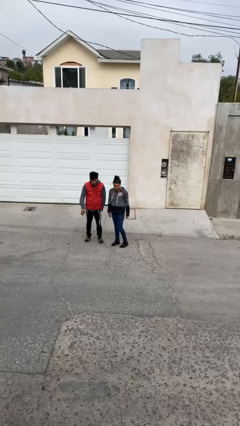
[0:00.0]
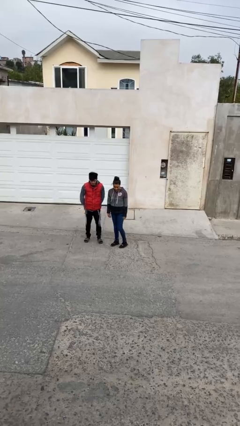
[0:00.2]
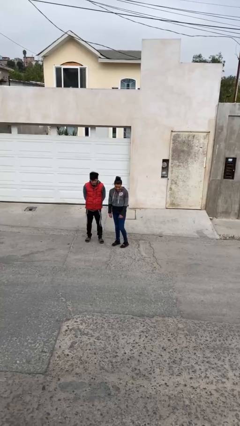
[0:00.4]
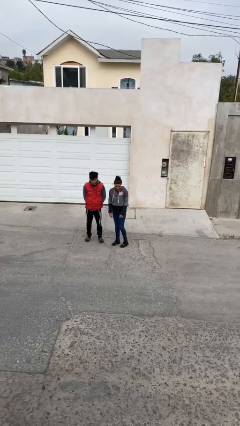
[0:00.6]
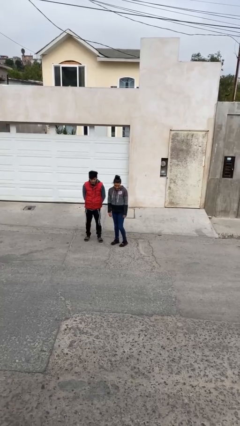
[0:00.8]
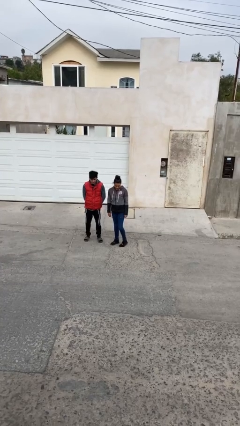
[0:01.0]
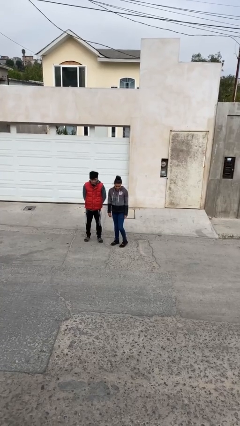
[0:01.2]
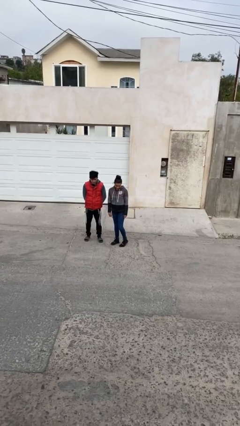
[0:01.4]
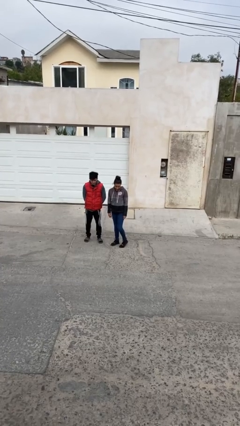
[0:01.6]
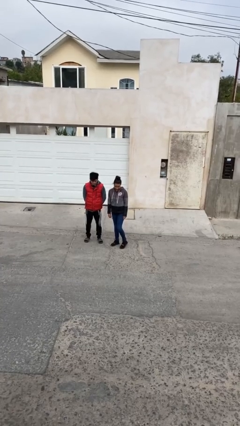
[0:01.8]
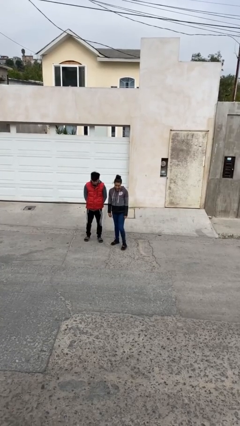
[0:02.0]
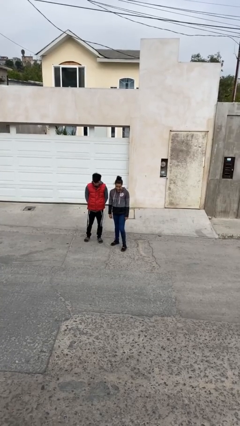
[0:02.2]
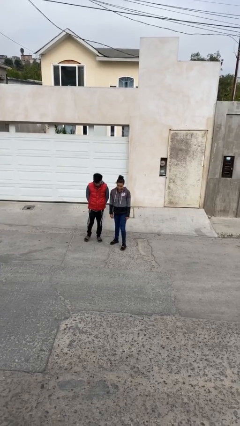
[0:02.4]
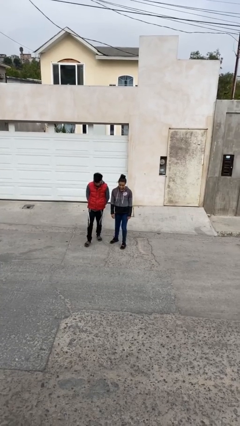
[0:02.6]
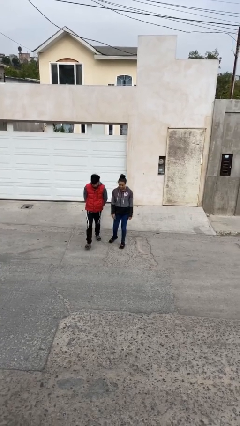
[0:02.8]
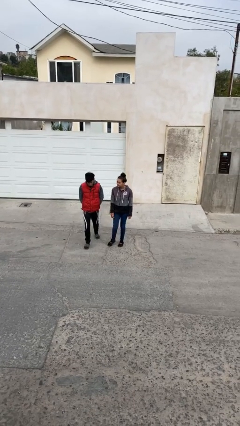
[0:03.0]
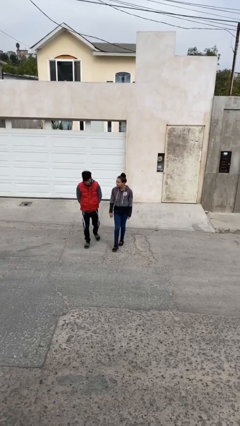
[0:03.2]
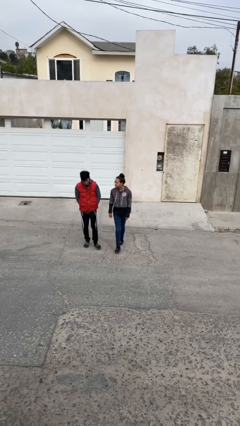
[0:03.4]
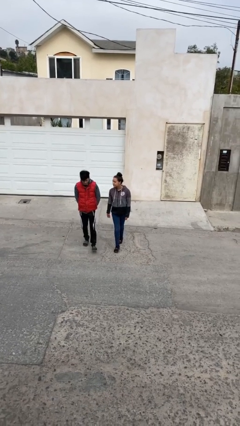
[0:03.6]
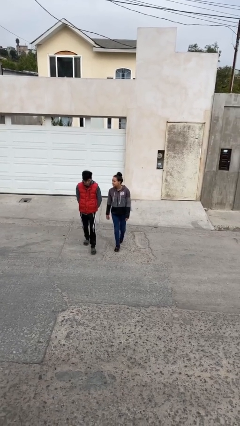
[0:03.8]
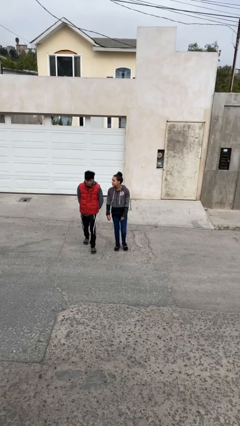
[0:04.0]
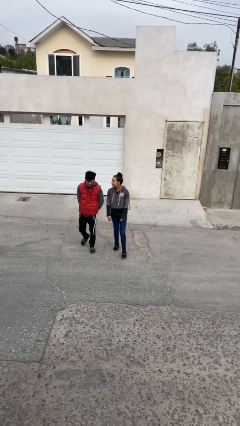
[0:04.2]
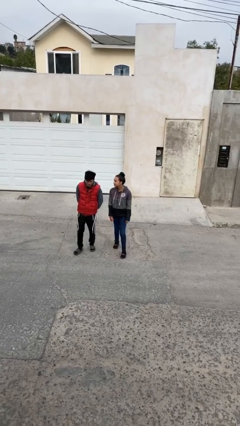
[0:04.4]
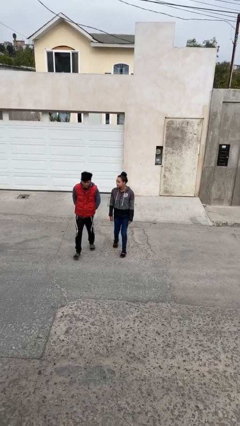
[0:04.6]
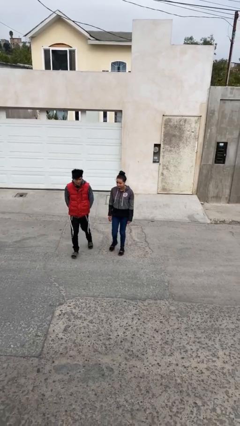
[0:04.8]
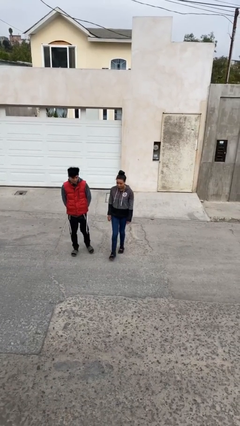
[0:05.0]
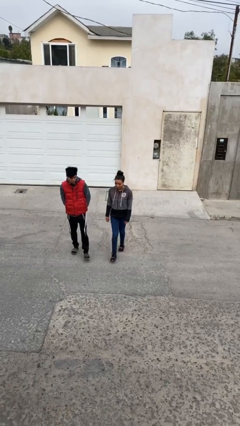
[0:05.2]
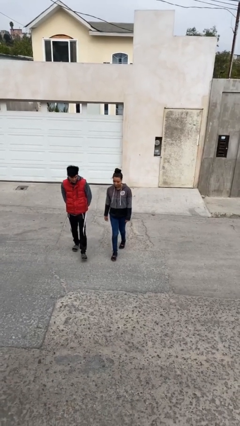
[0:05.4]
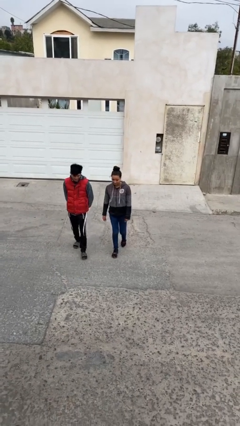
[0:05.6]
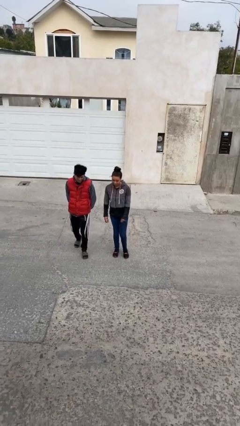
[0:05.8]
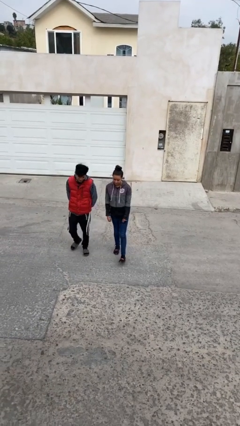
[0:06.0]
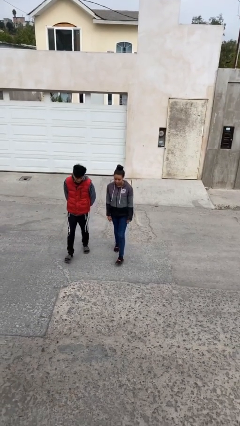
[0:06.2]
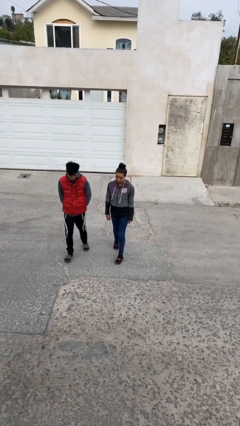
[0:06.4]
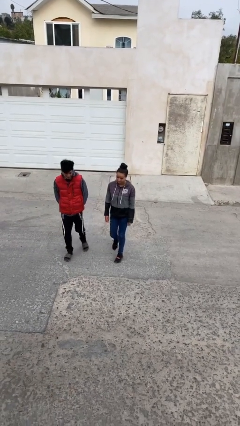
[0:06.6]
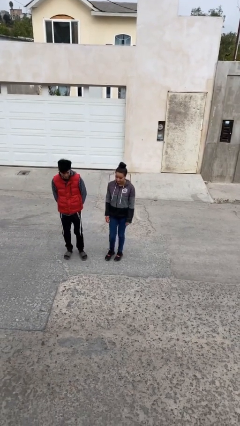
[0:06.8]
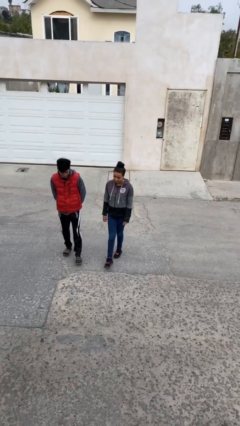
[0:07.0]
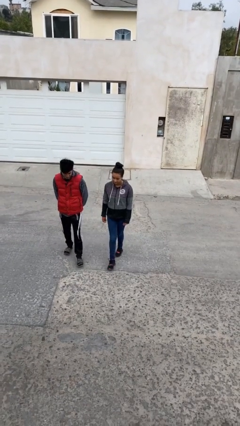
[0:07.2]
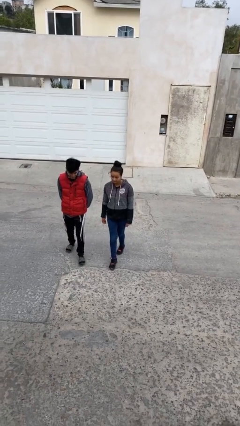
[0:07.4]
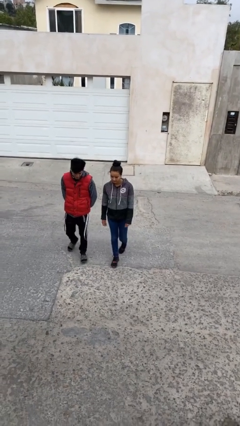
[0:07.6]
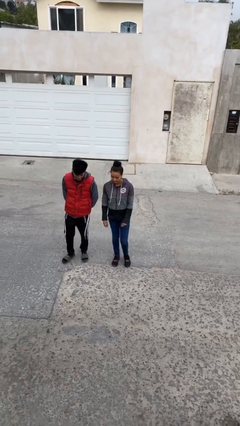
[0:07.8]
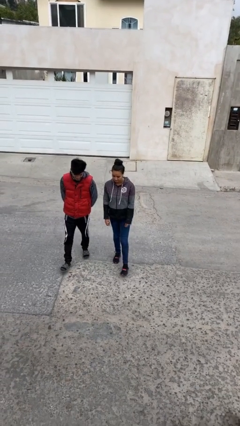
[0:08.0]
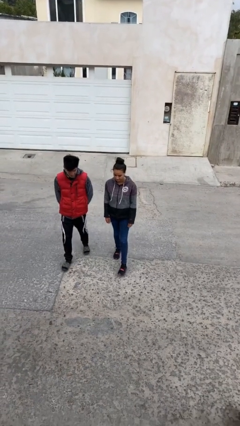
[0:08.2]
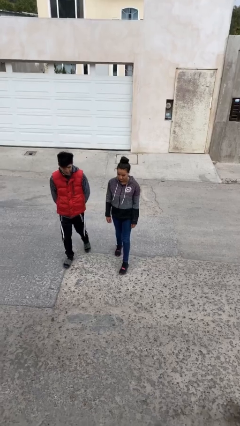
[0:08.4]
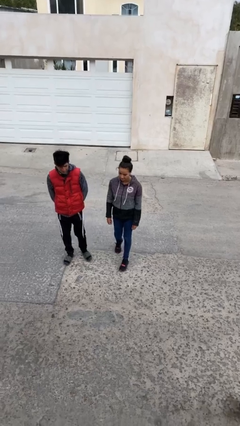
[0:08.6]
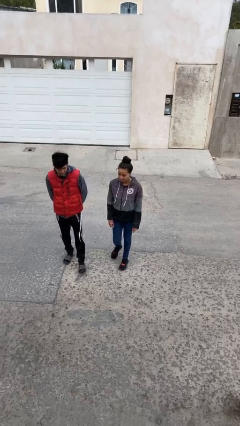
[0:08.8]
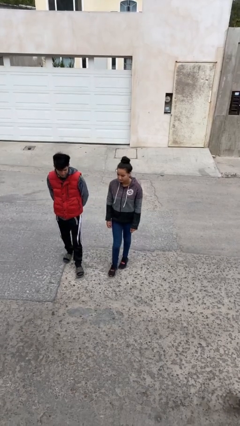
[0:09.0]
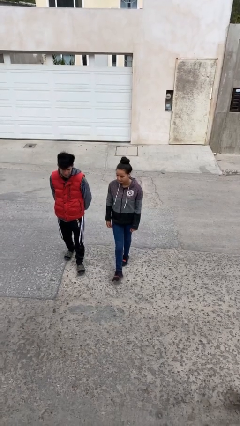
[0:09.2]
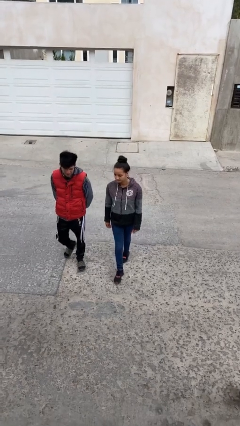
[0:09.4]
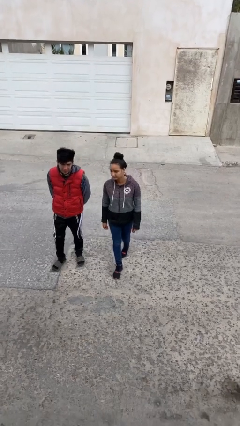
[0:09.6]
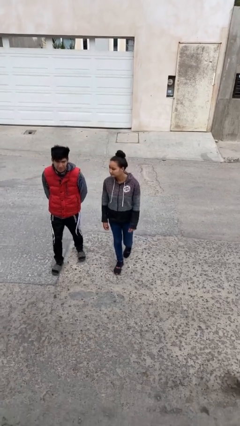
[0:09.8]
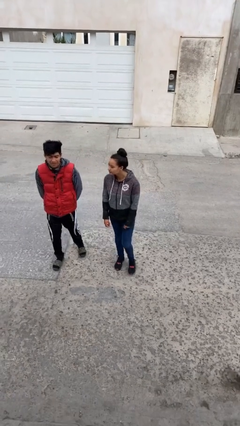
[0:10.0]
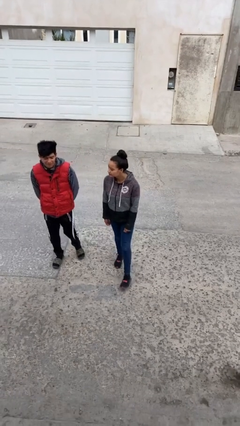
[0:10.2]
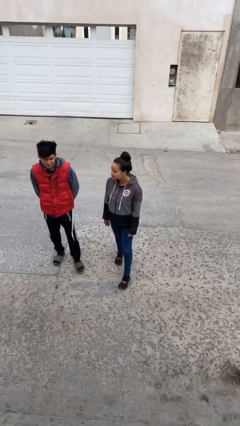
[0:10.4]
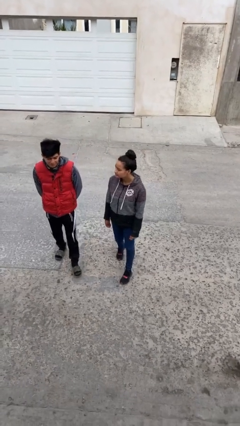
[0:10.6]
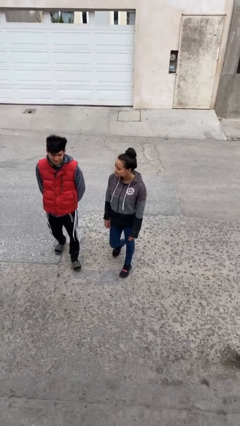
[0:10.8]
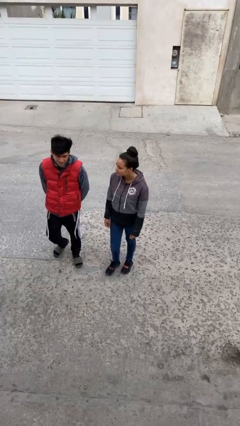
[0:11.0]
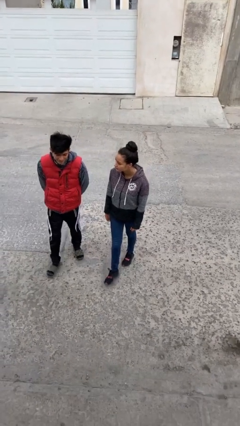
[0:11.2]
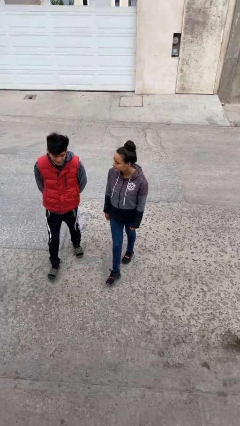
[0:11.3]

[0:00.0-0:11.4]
person talks to person

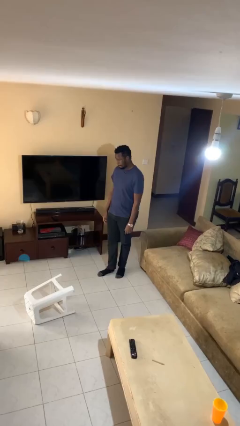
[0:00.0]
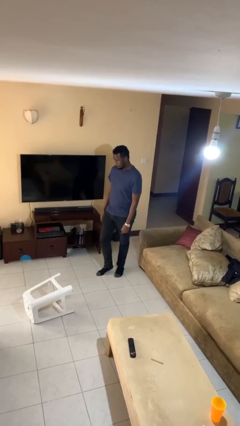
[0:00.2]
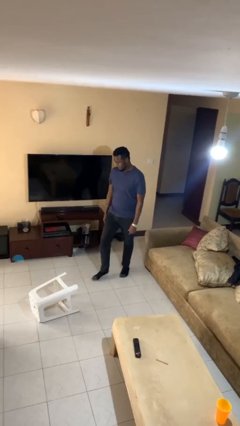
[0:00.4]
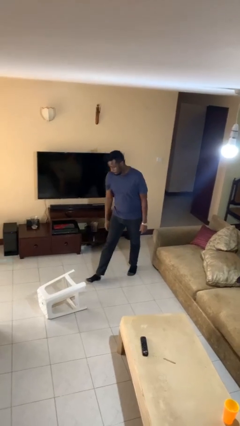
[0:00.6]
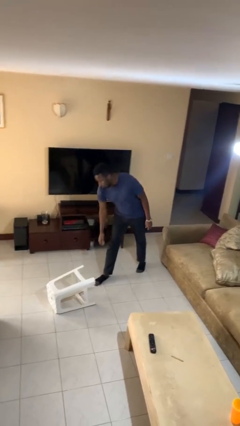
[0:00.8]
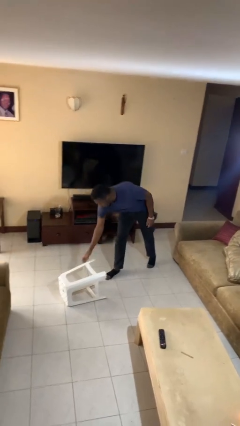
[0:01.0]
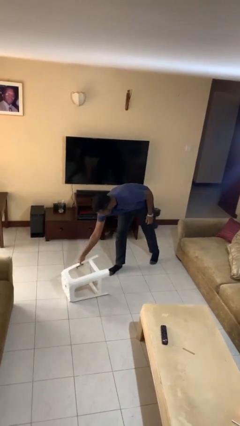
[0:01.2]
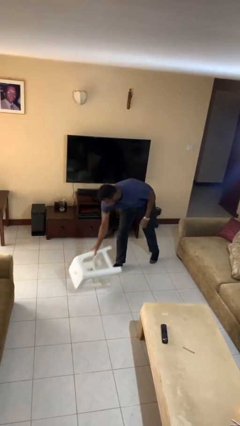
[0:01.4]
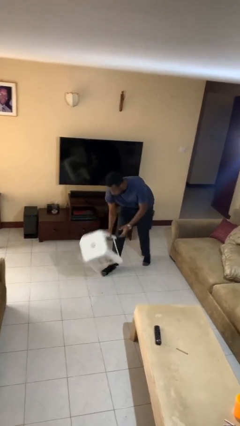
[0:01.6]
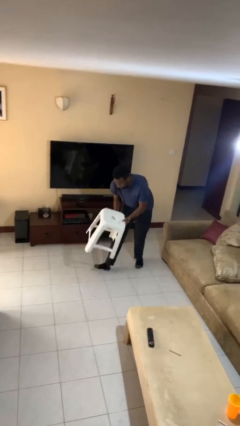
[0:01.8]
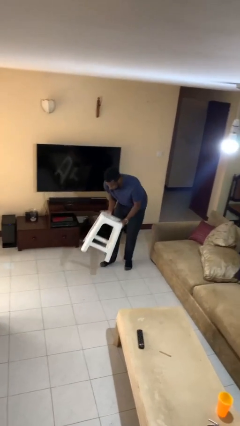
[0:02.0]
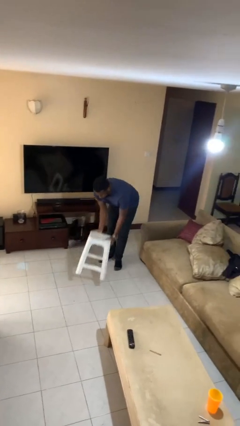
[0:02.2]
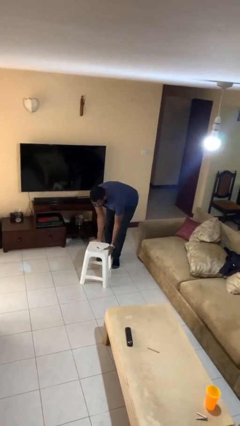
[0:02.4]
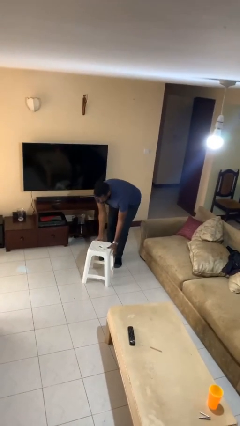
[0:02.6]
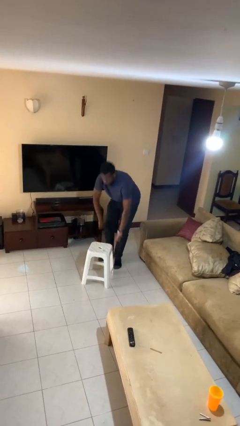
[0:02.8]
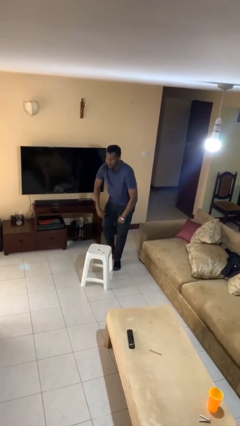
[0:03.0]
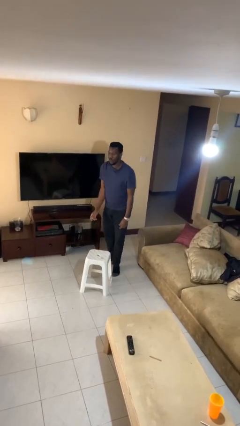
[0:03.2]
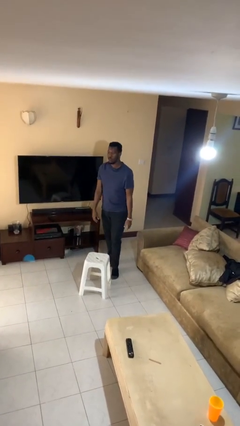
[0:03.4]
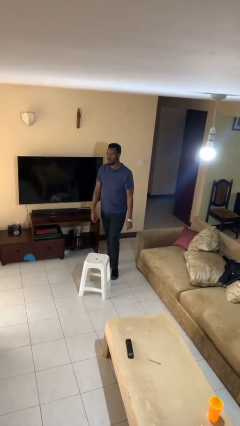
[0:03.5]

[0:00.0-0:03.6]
person sets upright furniture

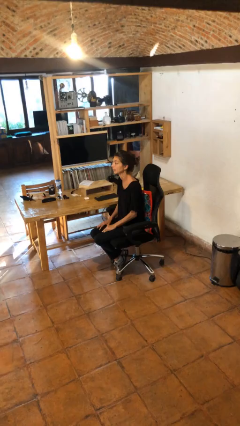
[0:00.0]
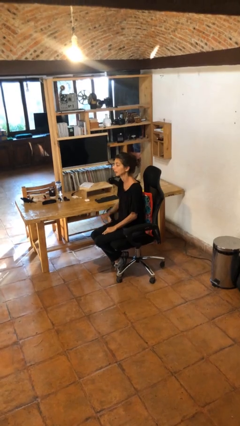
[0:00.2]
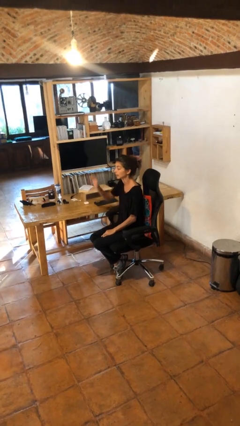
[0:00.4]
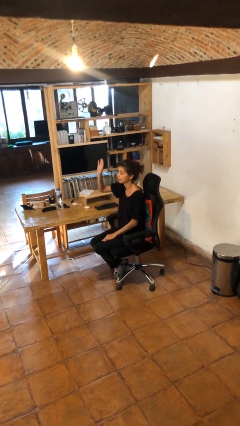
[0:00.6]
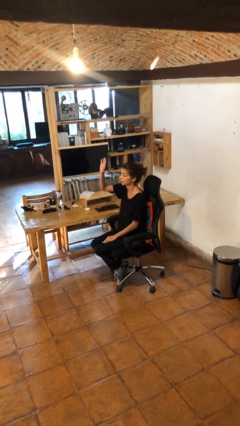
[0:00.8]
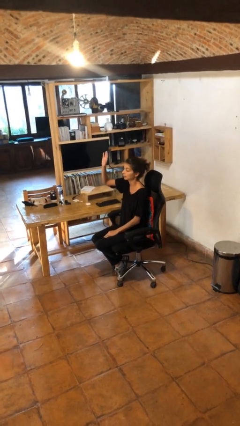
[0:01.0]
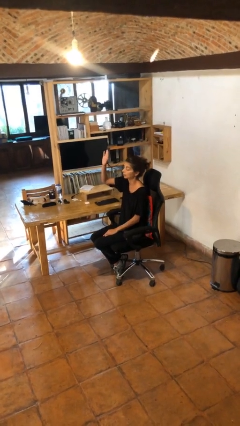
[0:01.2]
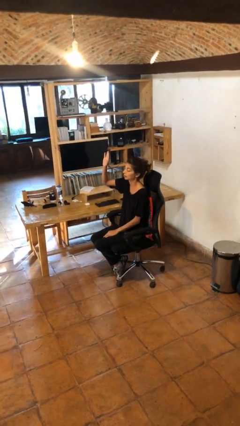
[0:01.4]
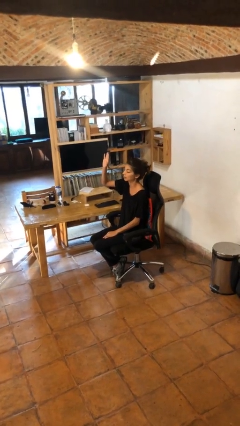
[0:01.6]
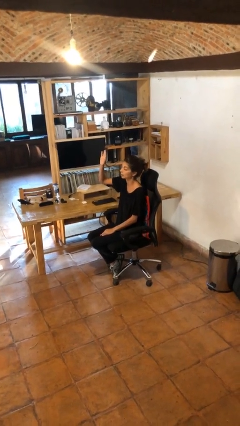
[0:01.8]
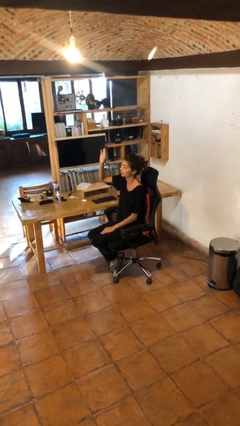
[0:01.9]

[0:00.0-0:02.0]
person gestures raise hand

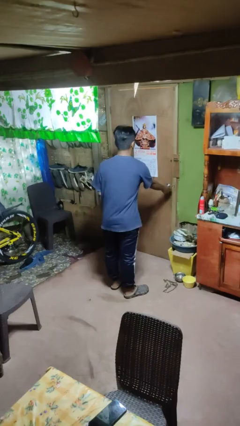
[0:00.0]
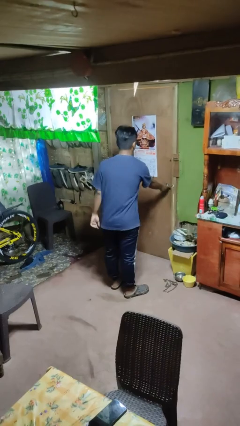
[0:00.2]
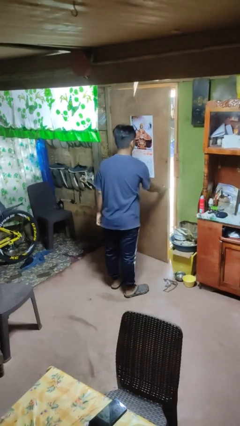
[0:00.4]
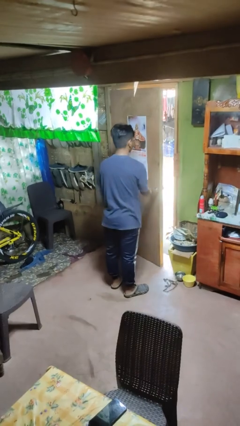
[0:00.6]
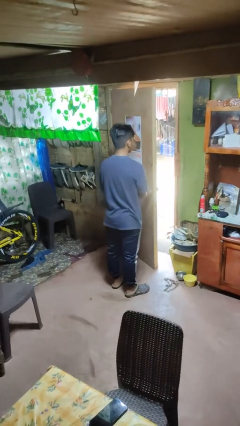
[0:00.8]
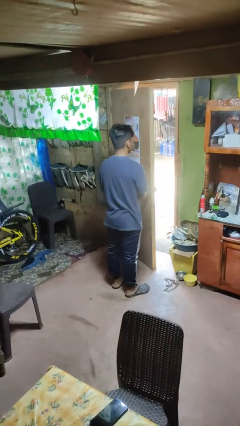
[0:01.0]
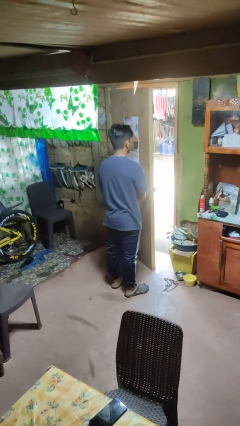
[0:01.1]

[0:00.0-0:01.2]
person opens facility door
